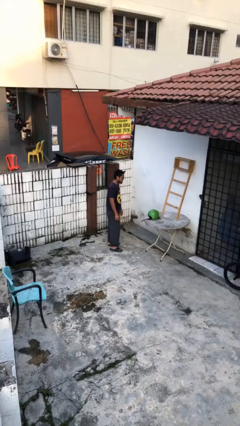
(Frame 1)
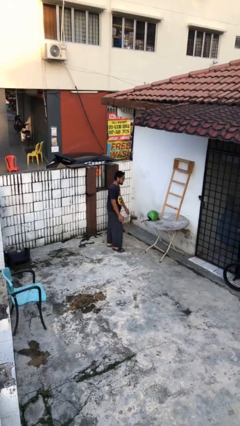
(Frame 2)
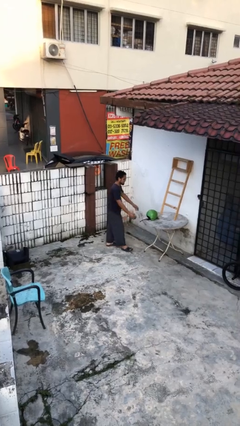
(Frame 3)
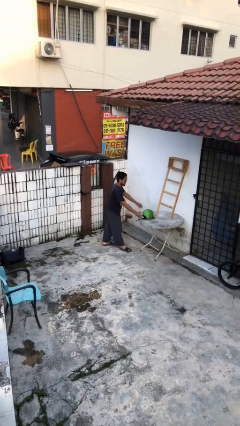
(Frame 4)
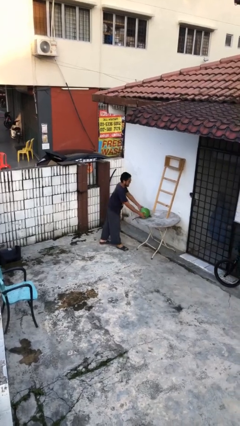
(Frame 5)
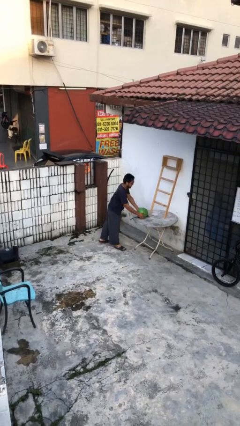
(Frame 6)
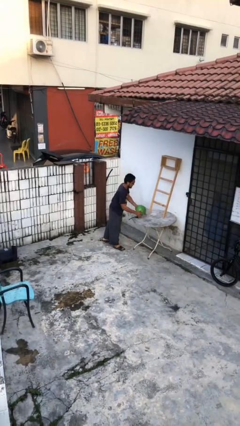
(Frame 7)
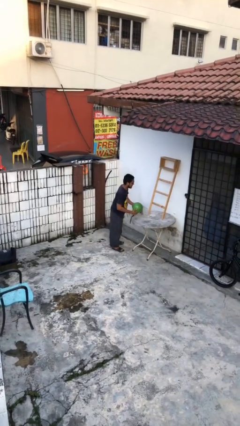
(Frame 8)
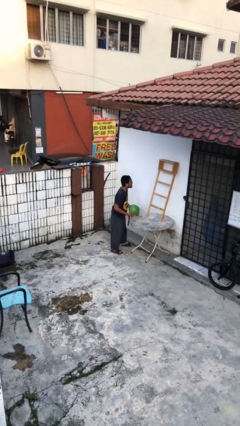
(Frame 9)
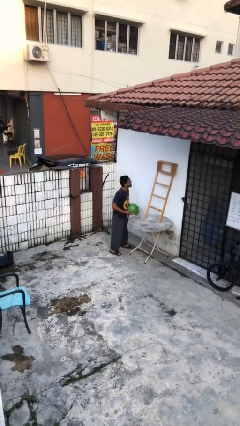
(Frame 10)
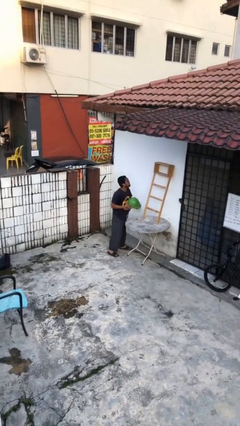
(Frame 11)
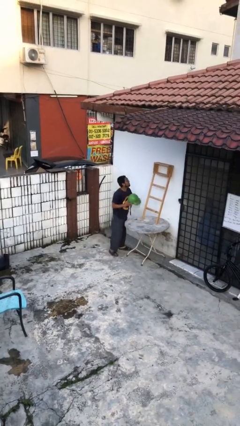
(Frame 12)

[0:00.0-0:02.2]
person picks up object from table

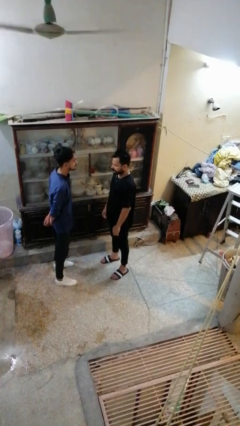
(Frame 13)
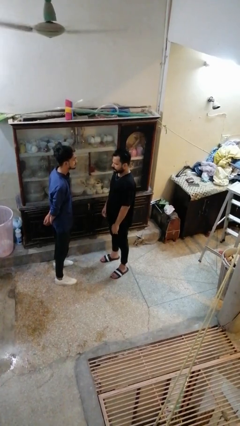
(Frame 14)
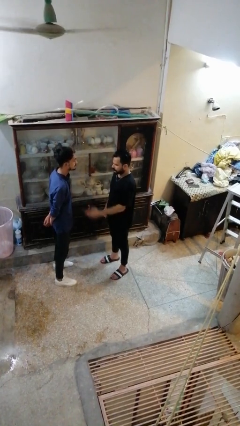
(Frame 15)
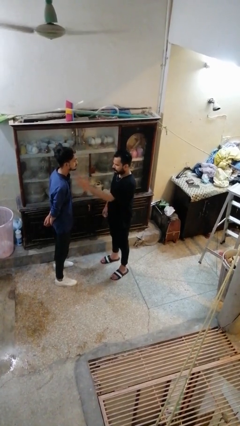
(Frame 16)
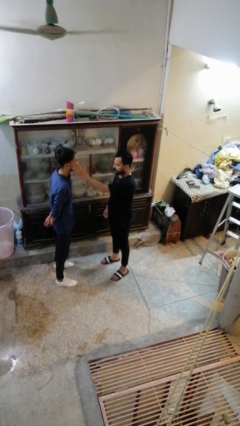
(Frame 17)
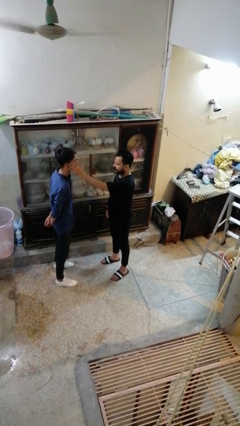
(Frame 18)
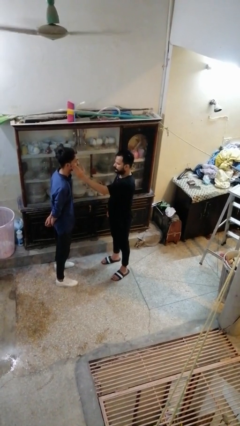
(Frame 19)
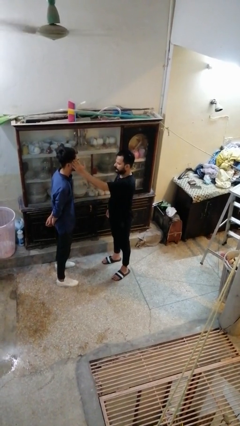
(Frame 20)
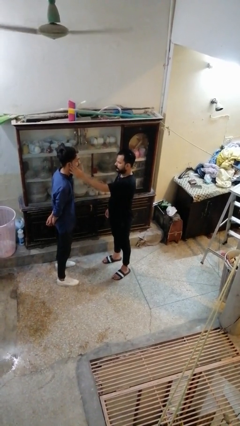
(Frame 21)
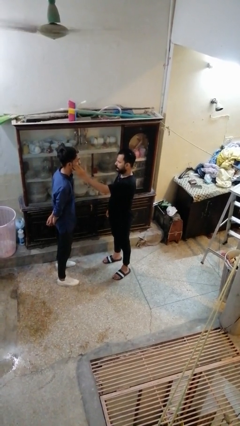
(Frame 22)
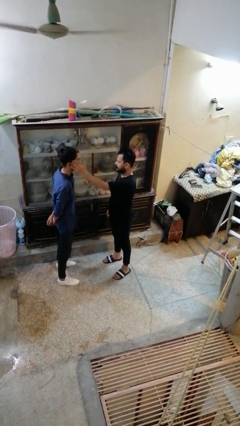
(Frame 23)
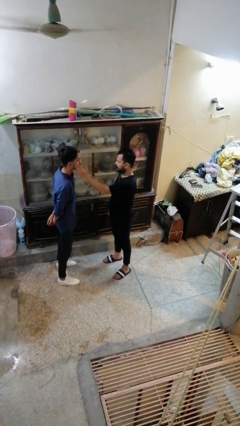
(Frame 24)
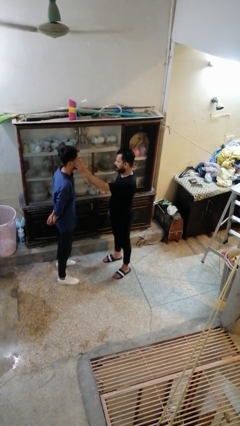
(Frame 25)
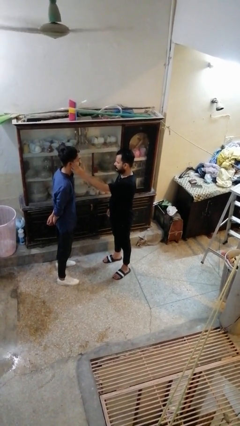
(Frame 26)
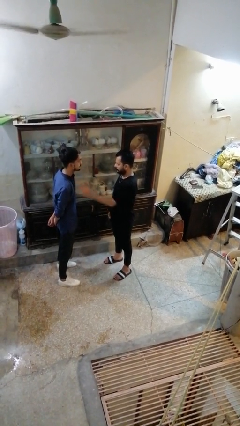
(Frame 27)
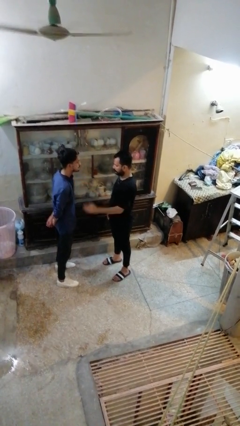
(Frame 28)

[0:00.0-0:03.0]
person touches face of person

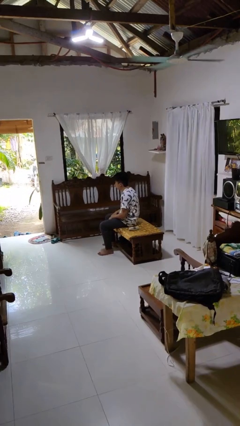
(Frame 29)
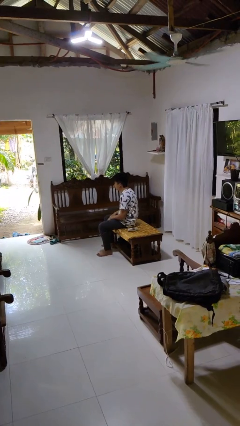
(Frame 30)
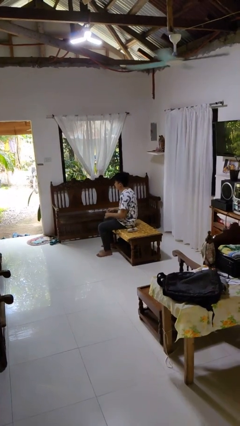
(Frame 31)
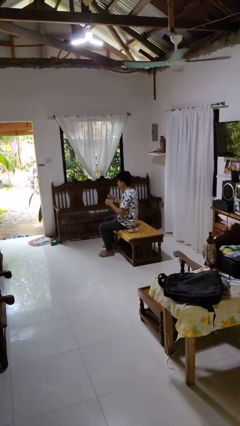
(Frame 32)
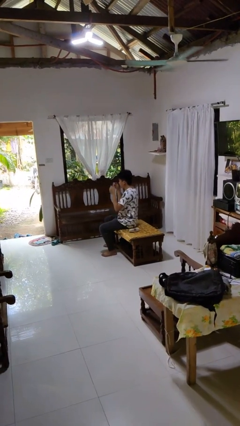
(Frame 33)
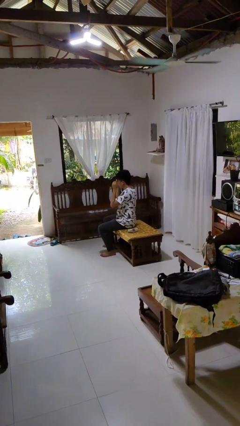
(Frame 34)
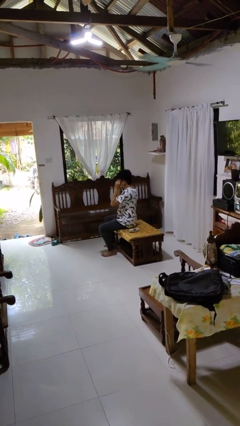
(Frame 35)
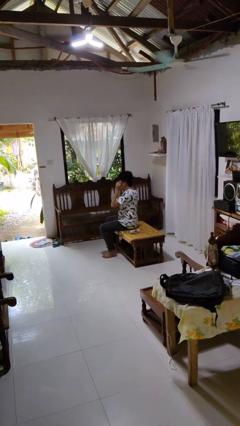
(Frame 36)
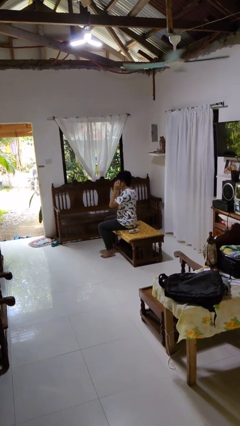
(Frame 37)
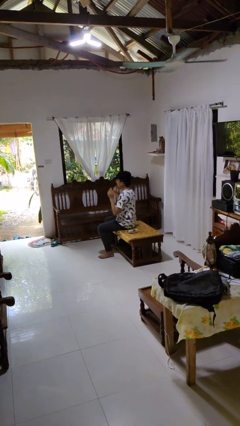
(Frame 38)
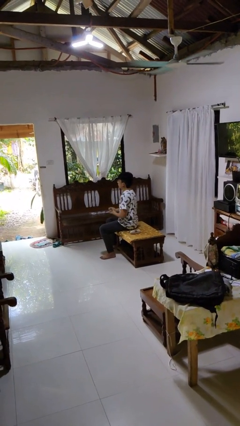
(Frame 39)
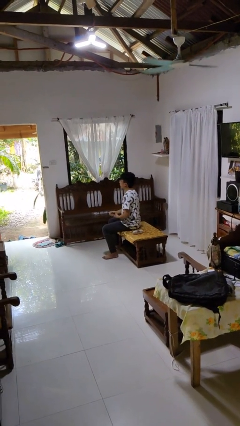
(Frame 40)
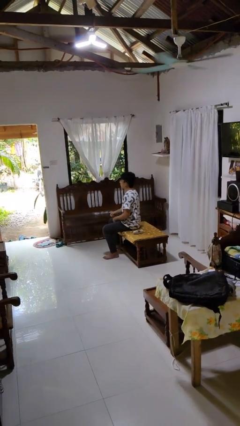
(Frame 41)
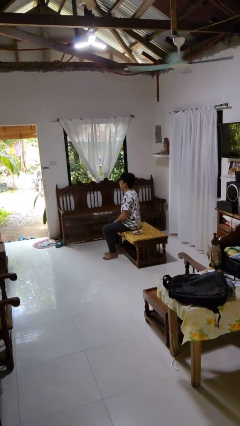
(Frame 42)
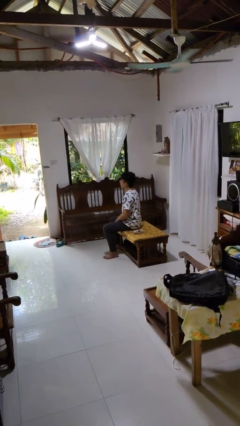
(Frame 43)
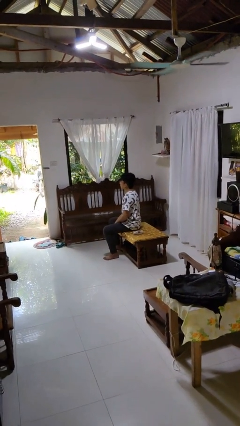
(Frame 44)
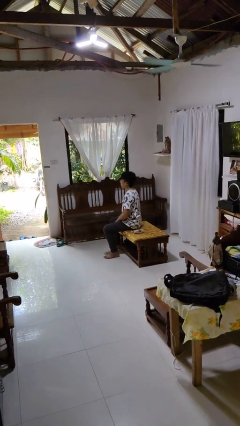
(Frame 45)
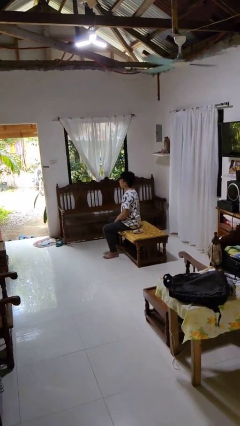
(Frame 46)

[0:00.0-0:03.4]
person puts on glasses

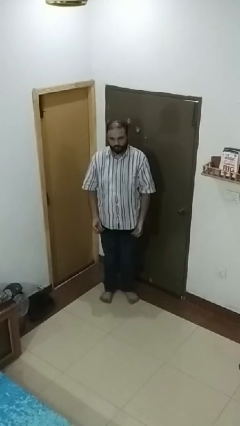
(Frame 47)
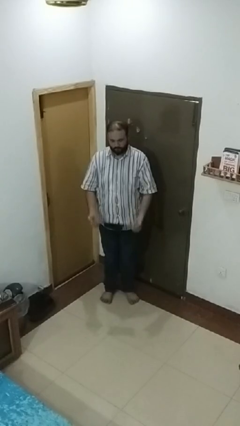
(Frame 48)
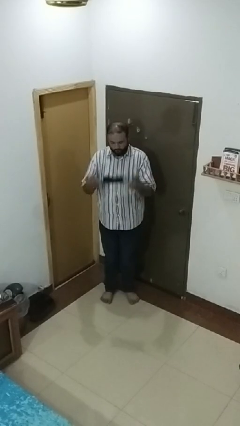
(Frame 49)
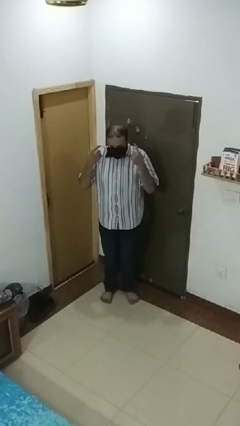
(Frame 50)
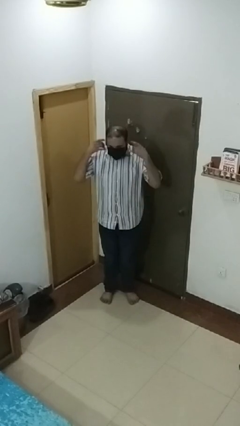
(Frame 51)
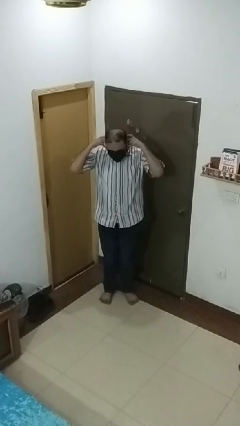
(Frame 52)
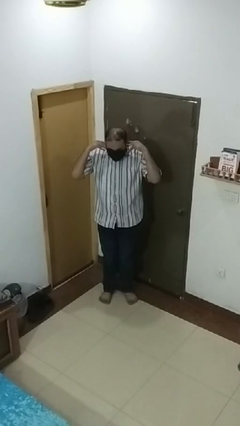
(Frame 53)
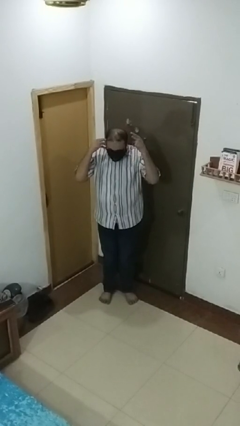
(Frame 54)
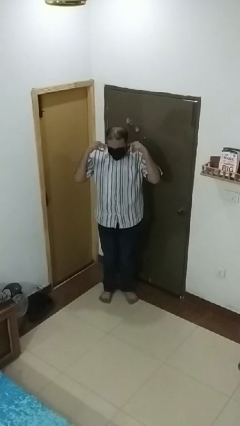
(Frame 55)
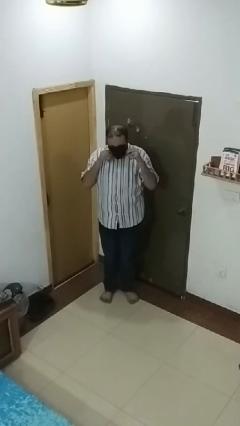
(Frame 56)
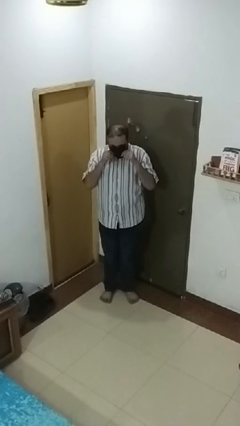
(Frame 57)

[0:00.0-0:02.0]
person puts on facemask

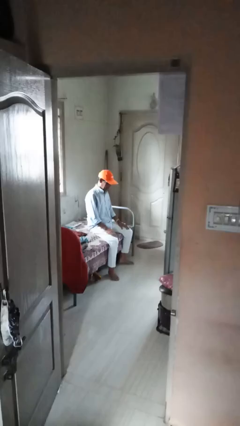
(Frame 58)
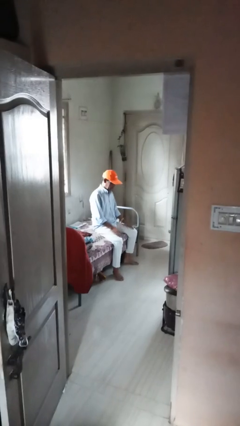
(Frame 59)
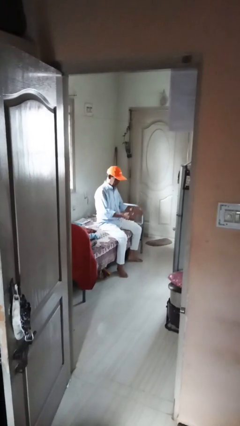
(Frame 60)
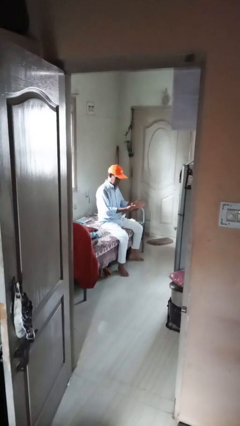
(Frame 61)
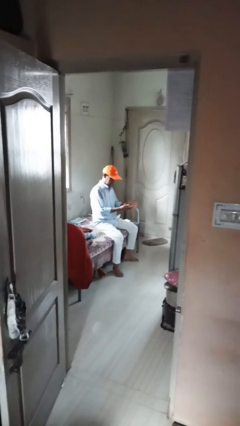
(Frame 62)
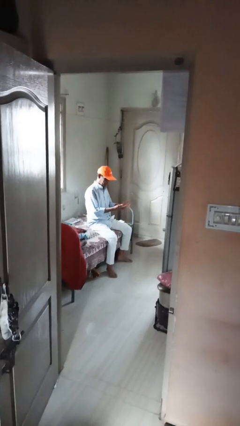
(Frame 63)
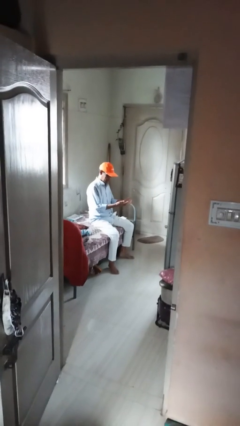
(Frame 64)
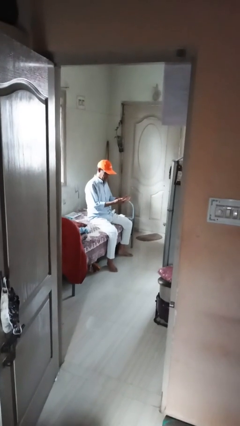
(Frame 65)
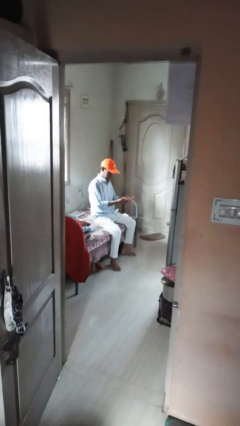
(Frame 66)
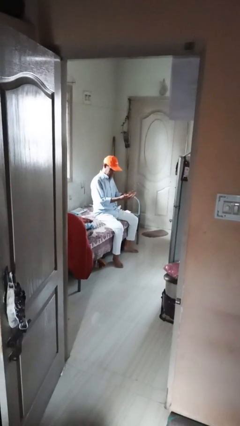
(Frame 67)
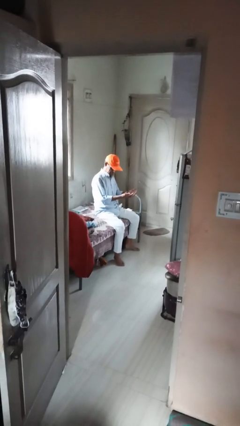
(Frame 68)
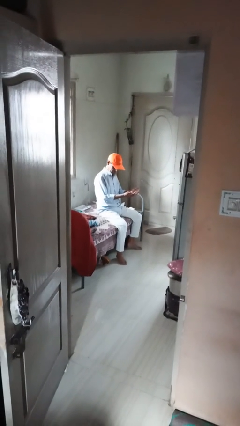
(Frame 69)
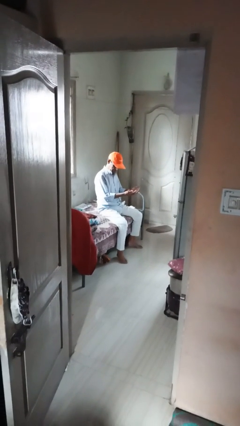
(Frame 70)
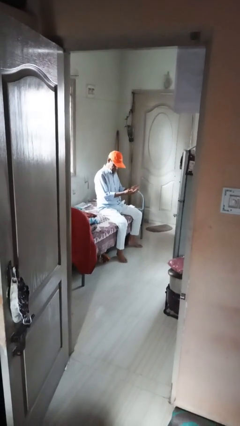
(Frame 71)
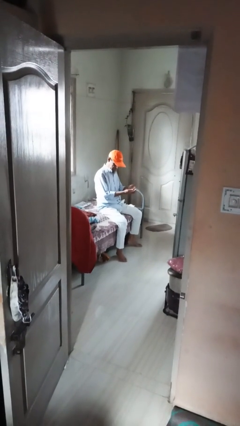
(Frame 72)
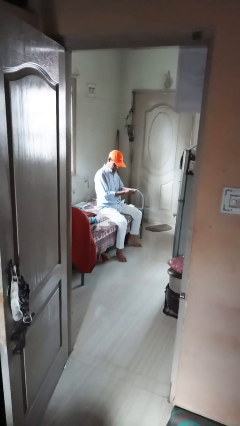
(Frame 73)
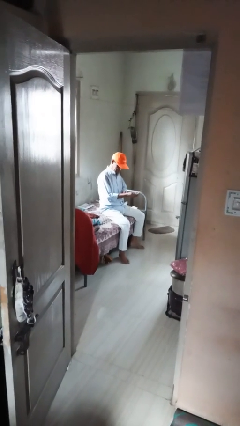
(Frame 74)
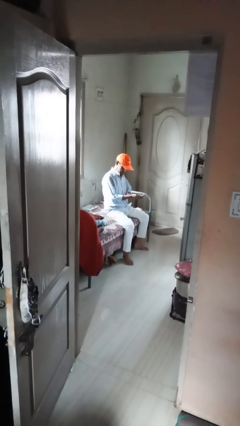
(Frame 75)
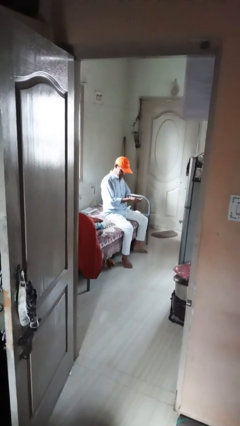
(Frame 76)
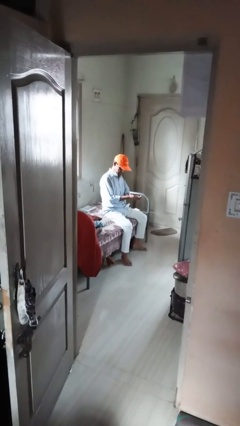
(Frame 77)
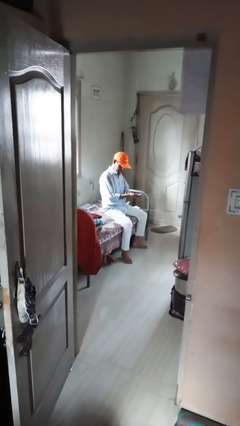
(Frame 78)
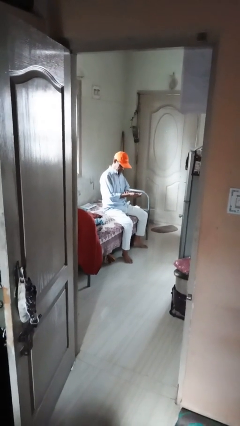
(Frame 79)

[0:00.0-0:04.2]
person looks at hands in lap

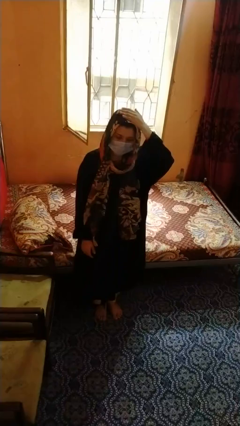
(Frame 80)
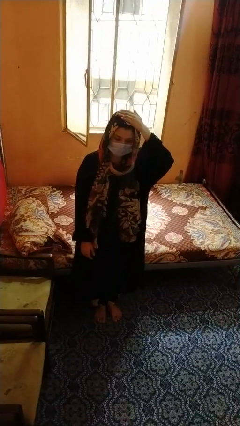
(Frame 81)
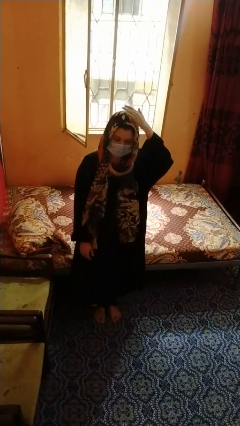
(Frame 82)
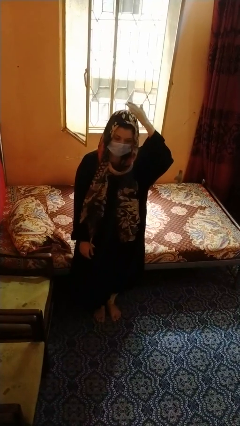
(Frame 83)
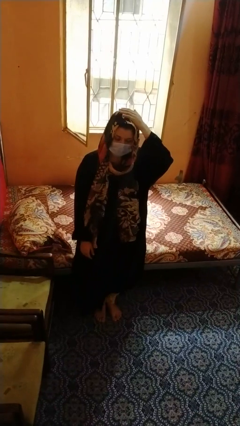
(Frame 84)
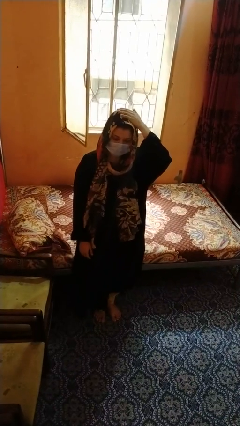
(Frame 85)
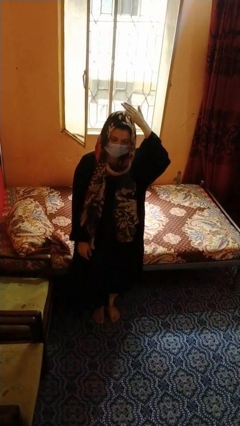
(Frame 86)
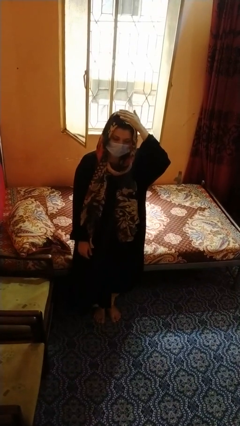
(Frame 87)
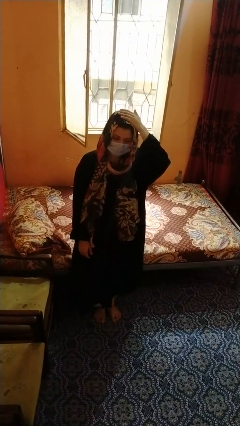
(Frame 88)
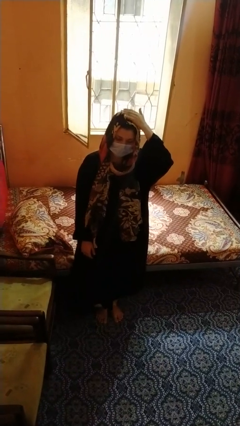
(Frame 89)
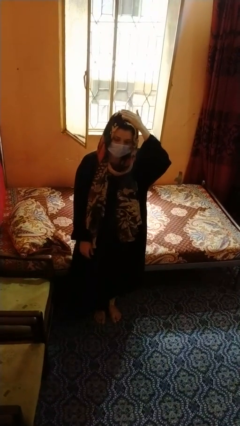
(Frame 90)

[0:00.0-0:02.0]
person pats head

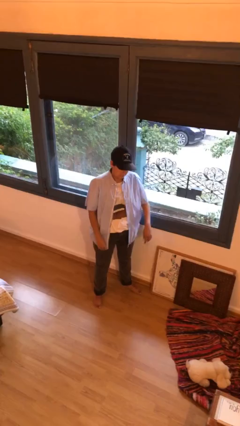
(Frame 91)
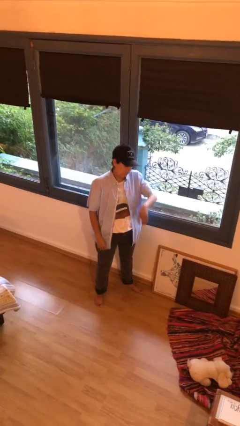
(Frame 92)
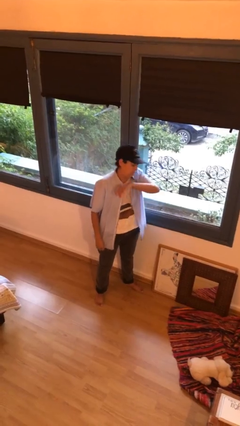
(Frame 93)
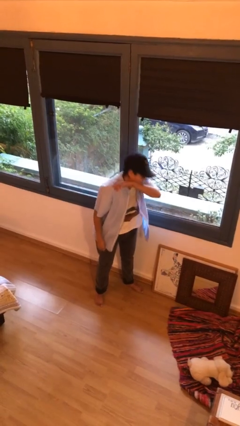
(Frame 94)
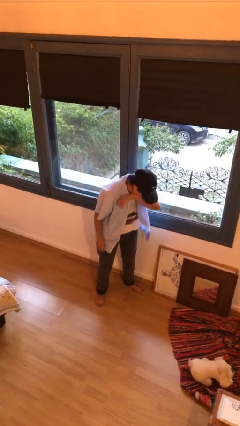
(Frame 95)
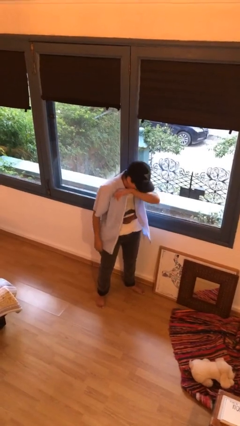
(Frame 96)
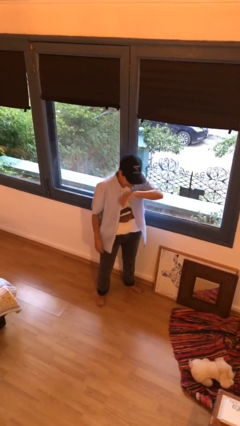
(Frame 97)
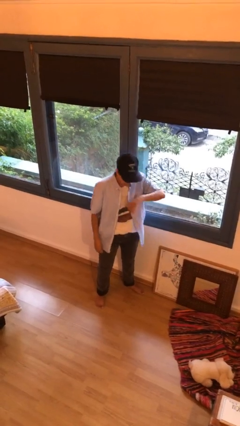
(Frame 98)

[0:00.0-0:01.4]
person sneezes into arm
